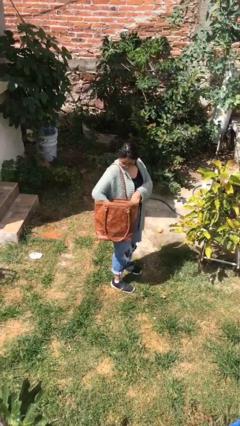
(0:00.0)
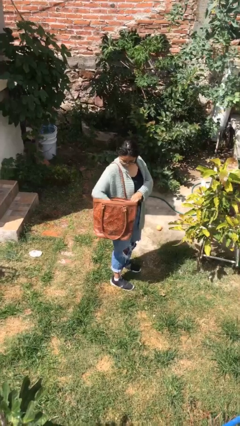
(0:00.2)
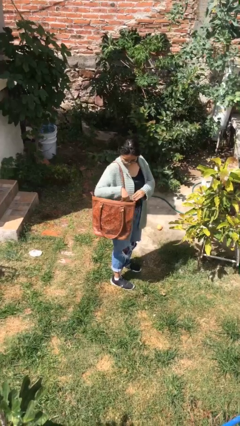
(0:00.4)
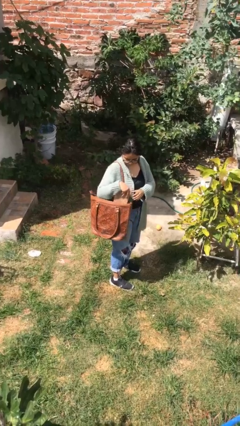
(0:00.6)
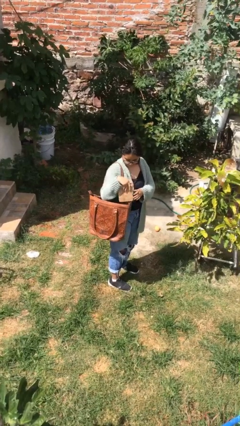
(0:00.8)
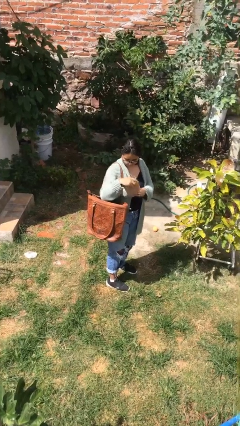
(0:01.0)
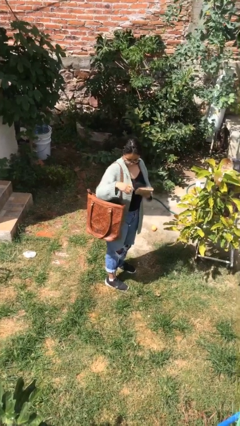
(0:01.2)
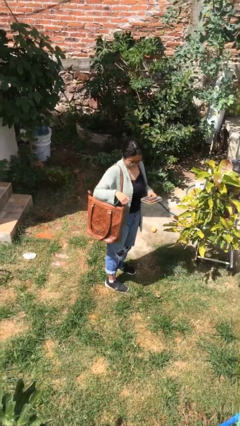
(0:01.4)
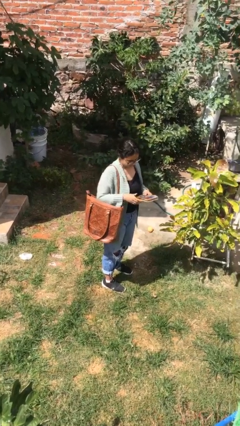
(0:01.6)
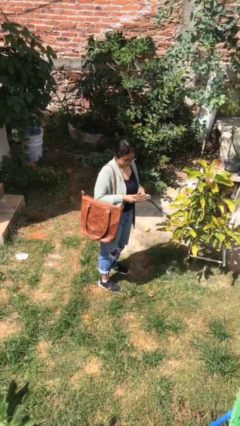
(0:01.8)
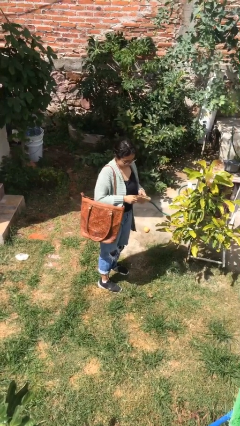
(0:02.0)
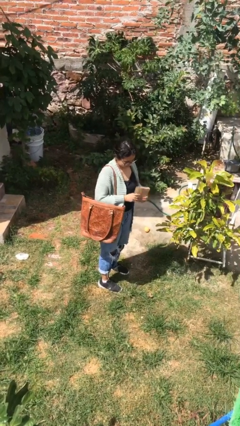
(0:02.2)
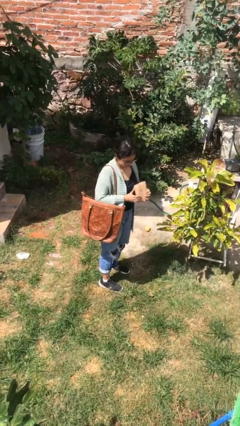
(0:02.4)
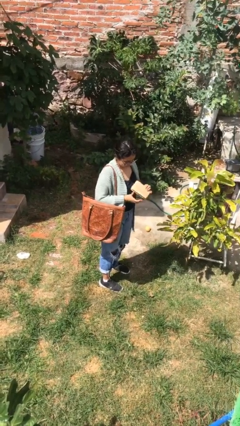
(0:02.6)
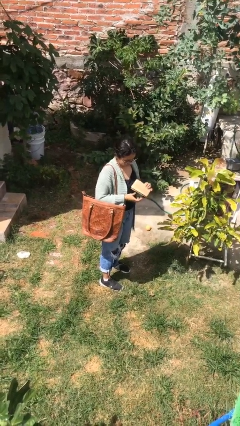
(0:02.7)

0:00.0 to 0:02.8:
person takes object from purse

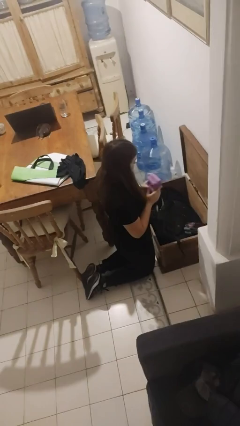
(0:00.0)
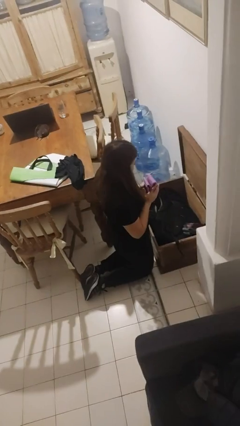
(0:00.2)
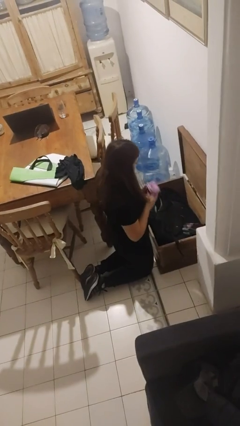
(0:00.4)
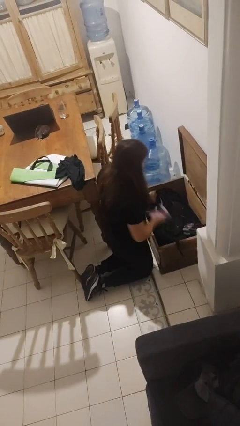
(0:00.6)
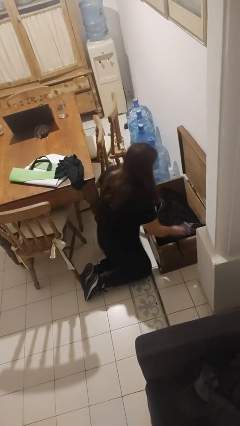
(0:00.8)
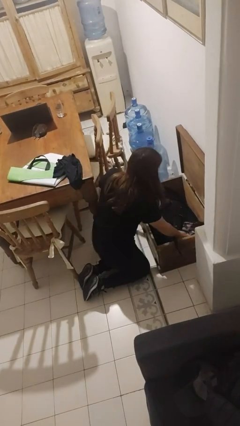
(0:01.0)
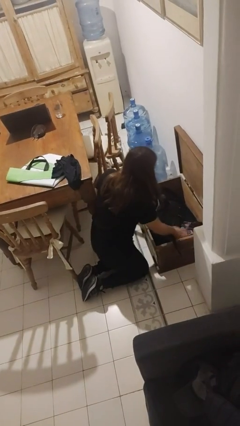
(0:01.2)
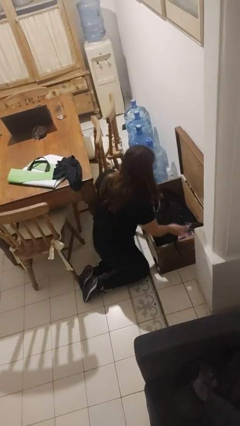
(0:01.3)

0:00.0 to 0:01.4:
person puts object into box

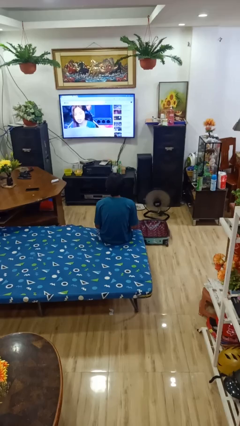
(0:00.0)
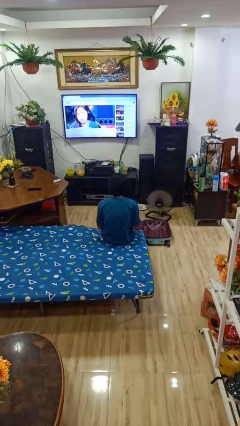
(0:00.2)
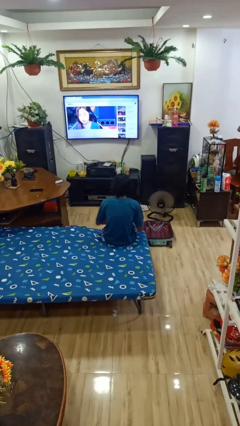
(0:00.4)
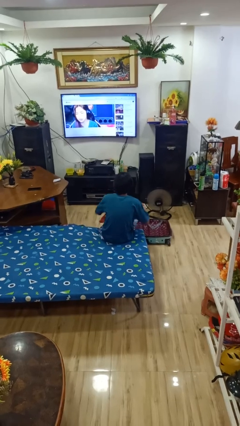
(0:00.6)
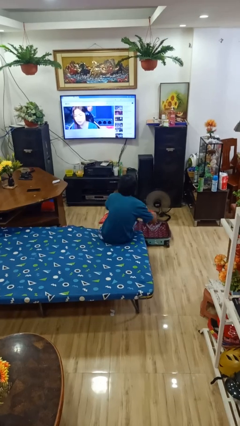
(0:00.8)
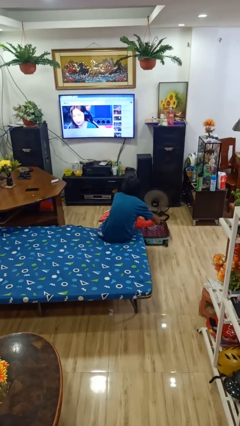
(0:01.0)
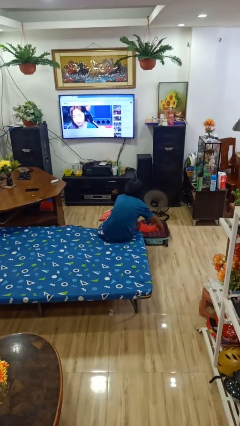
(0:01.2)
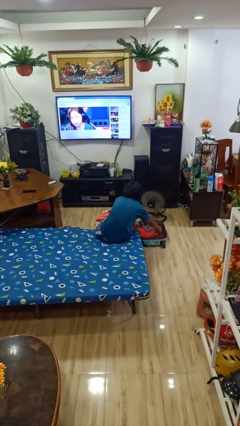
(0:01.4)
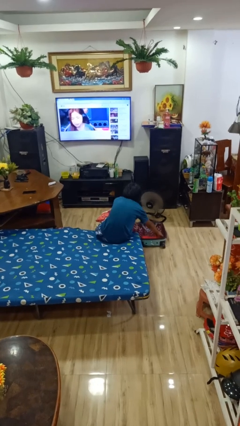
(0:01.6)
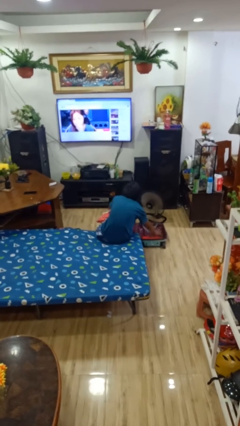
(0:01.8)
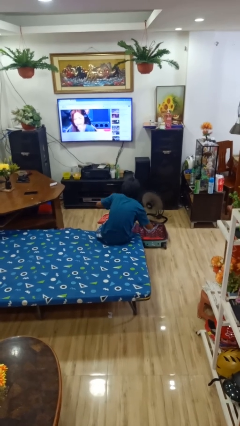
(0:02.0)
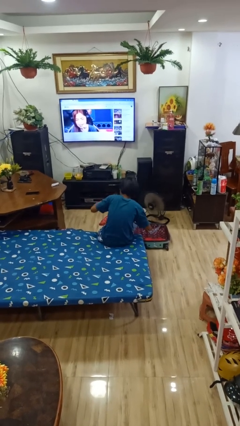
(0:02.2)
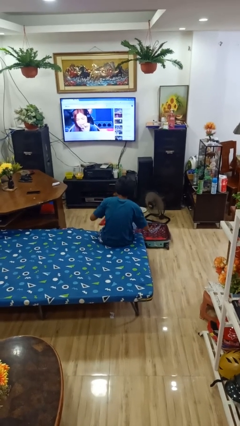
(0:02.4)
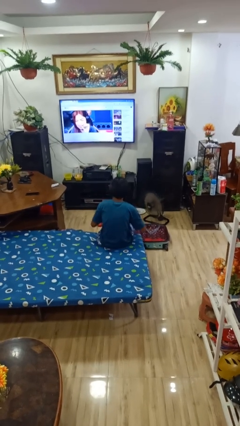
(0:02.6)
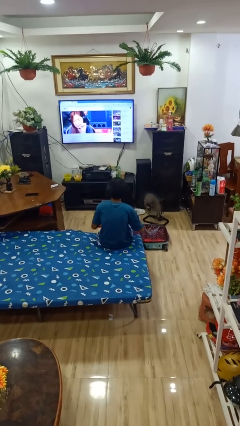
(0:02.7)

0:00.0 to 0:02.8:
person loads clothes into suitcase

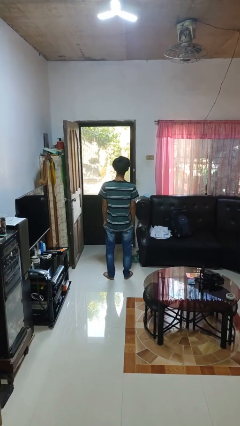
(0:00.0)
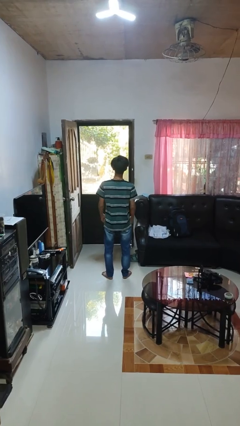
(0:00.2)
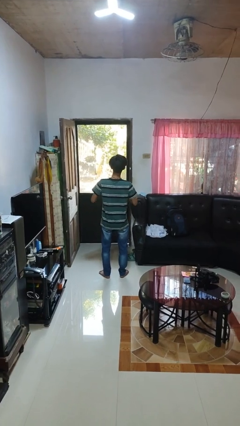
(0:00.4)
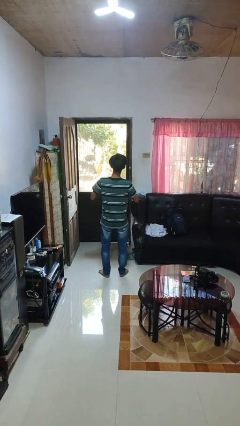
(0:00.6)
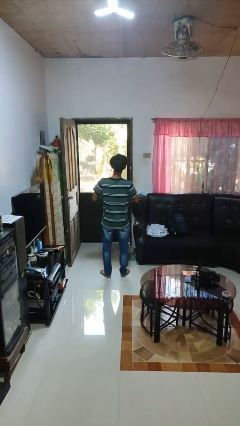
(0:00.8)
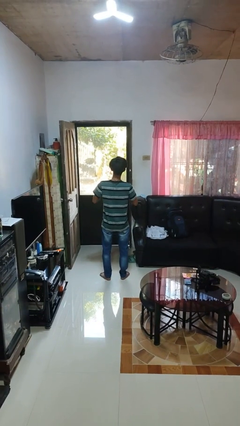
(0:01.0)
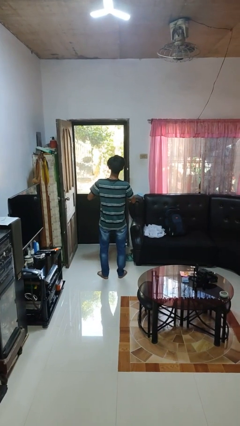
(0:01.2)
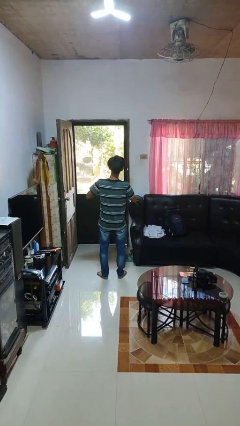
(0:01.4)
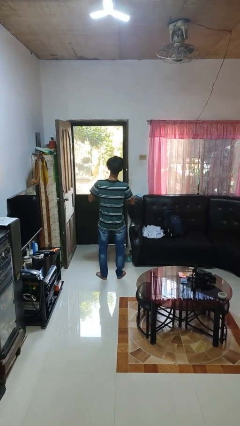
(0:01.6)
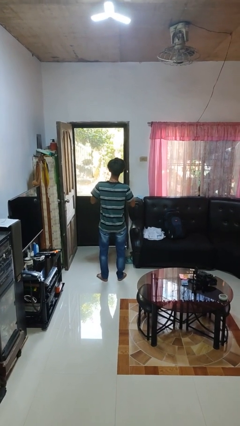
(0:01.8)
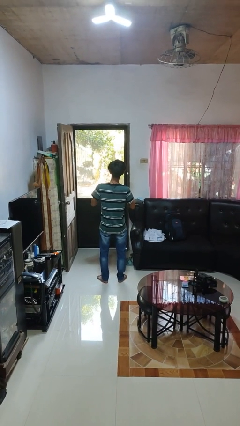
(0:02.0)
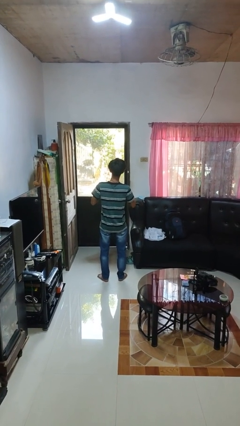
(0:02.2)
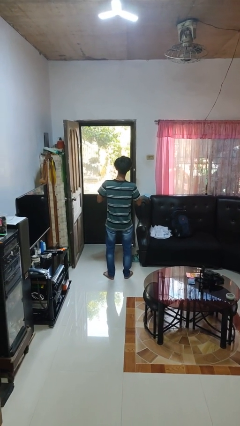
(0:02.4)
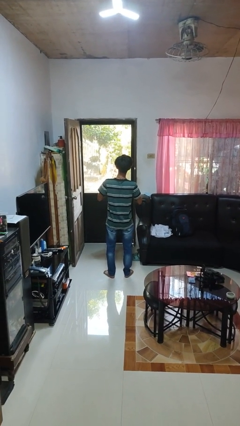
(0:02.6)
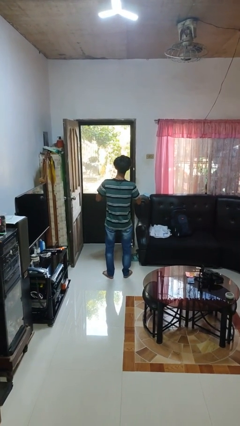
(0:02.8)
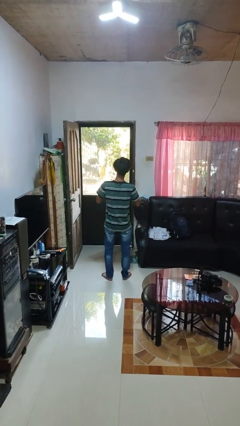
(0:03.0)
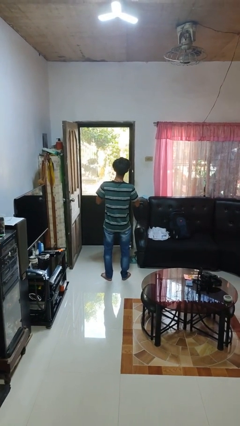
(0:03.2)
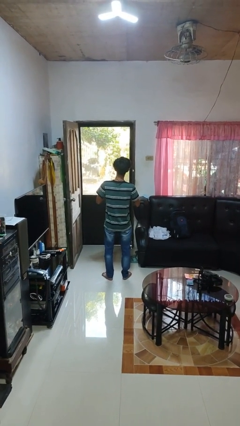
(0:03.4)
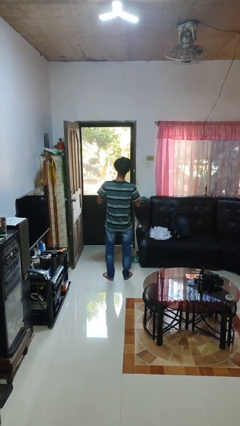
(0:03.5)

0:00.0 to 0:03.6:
person unbuttons shirt

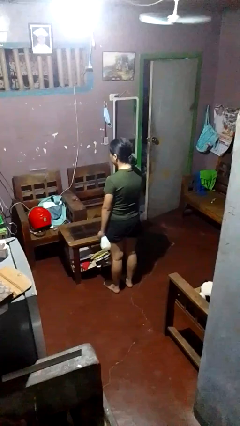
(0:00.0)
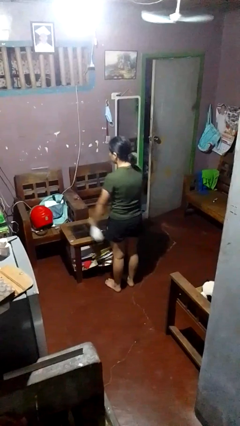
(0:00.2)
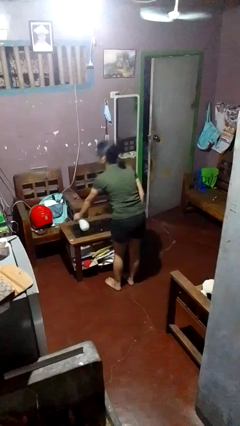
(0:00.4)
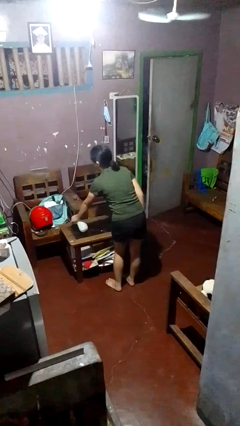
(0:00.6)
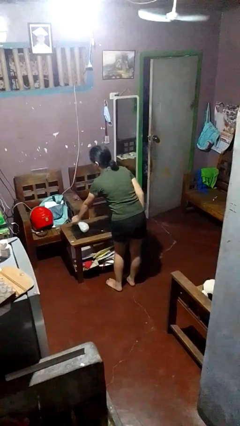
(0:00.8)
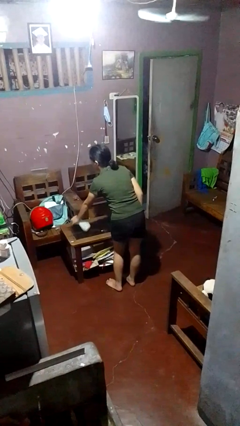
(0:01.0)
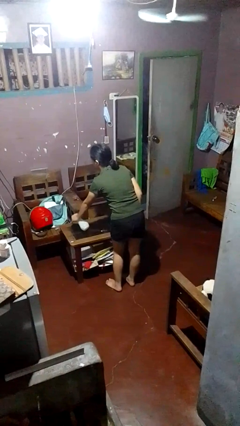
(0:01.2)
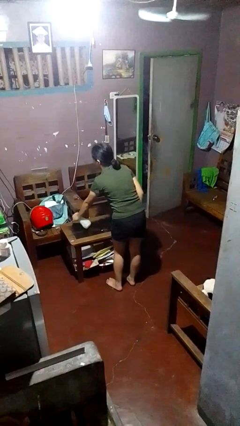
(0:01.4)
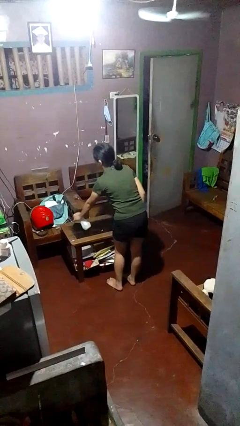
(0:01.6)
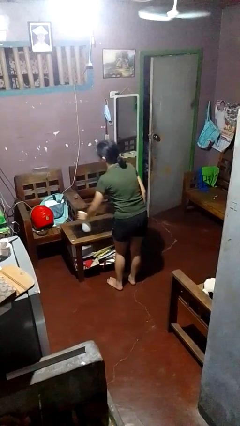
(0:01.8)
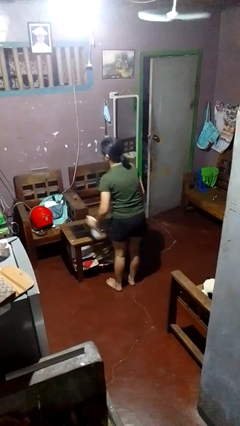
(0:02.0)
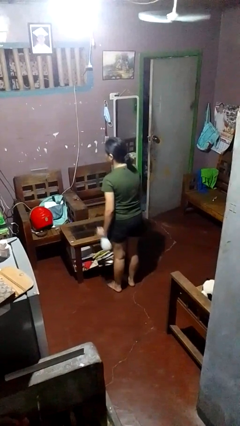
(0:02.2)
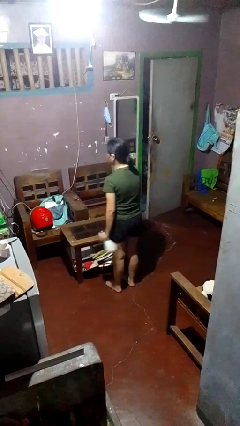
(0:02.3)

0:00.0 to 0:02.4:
person sprays from bottle

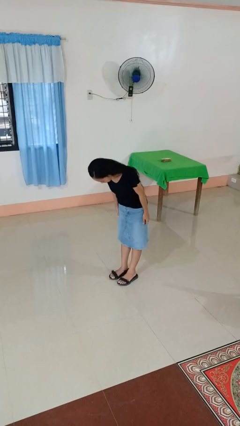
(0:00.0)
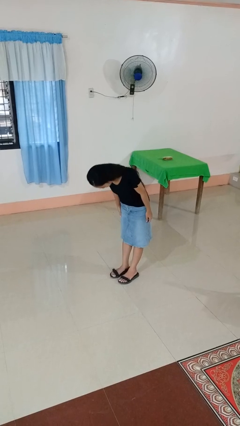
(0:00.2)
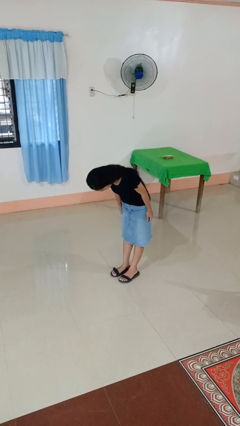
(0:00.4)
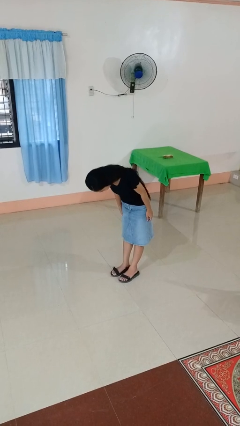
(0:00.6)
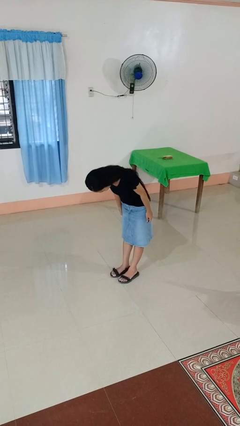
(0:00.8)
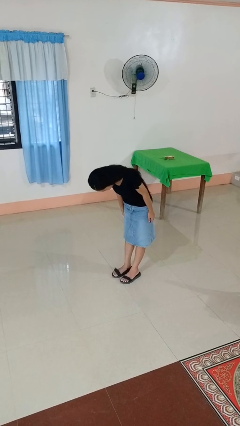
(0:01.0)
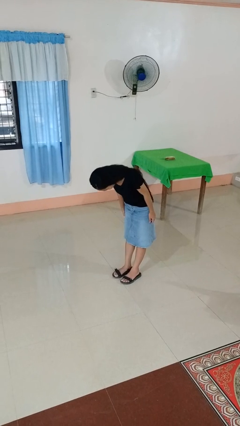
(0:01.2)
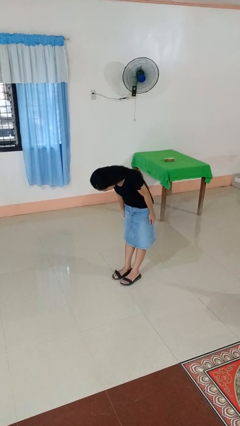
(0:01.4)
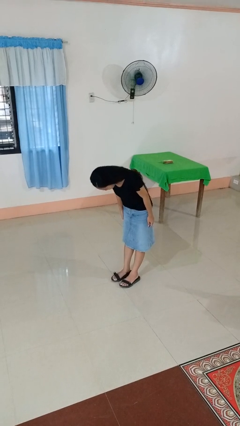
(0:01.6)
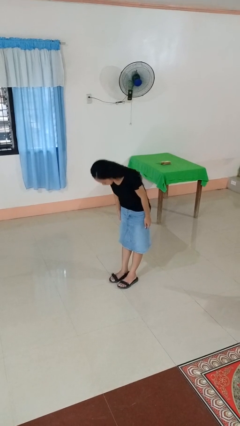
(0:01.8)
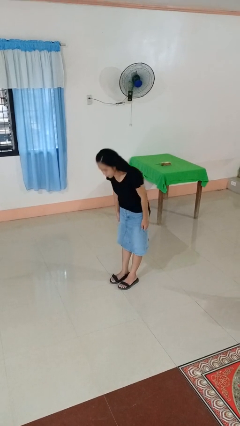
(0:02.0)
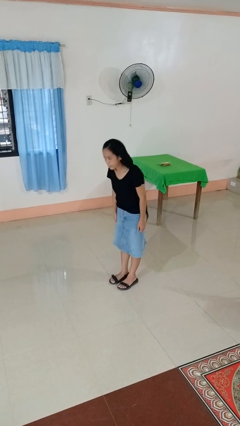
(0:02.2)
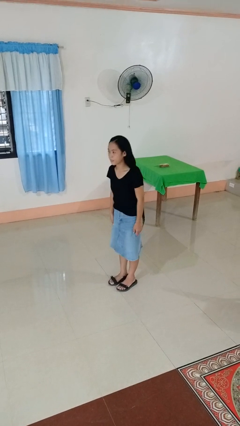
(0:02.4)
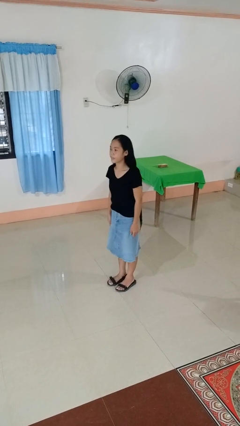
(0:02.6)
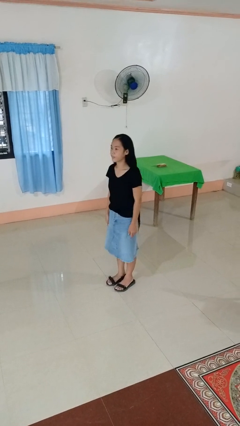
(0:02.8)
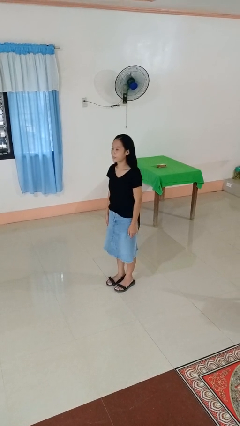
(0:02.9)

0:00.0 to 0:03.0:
person bows

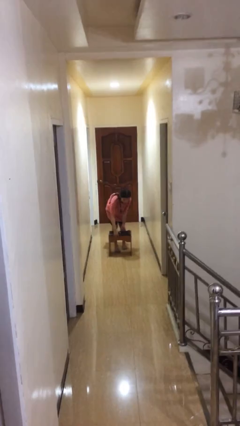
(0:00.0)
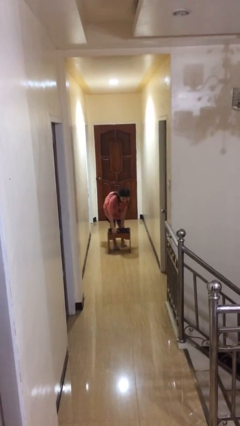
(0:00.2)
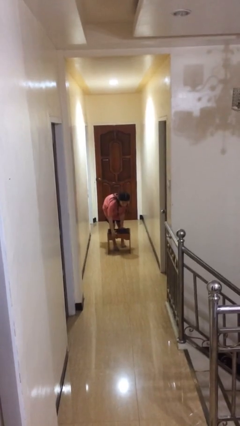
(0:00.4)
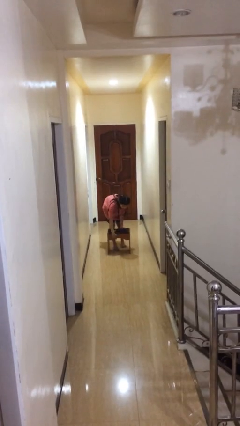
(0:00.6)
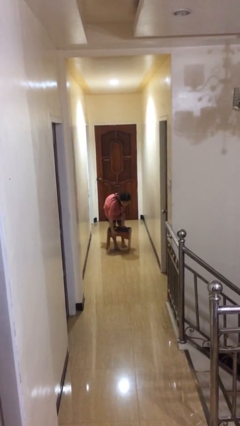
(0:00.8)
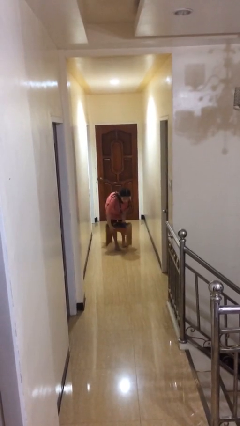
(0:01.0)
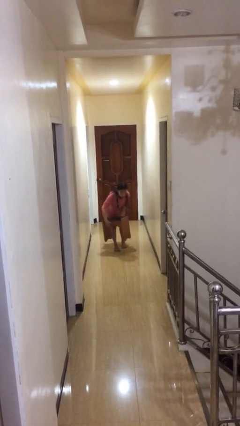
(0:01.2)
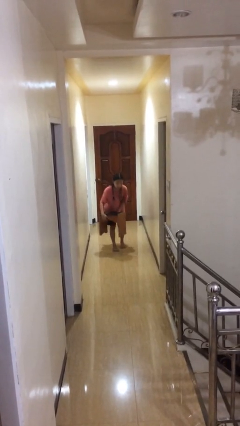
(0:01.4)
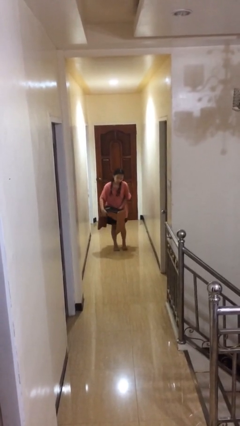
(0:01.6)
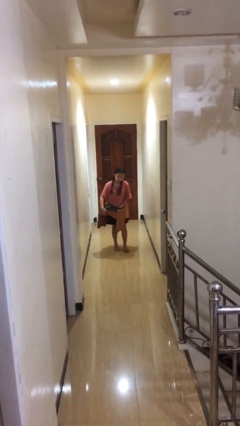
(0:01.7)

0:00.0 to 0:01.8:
person picks up object from floor
